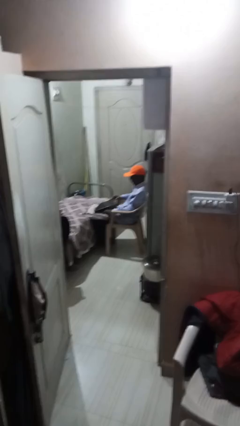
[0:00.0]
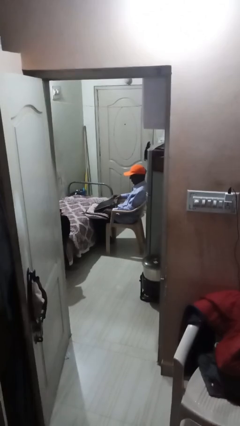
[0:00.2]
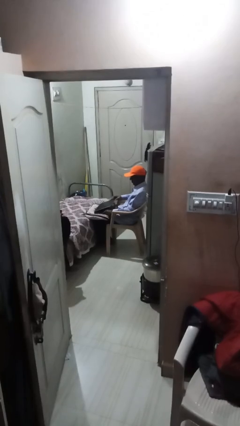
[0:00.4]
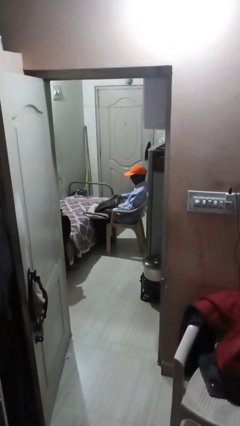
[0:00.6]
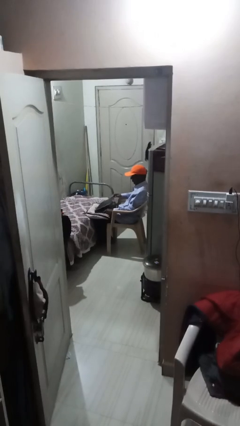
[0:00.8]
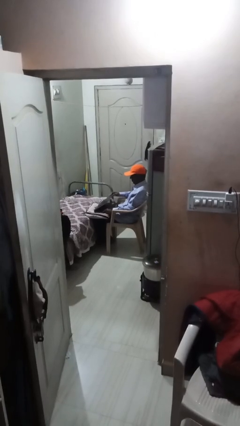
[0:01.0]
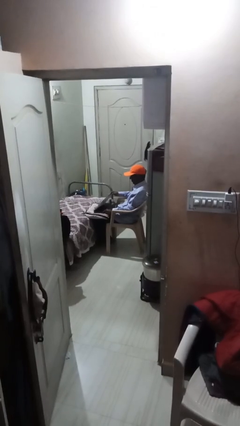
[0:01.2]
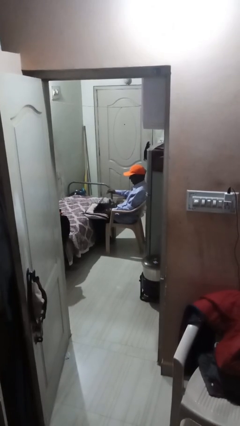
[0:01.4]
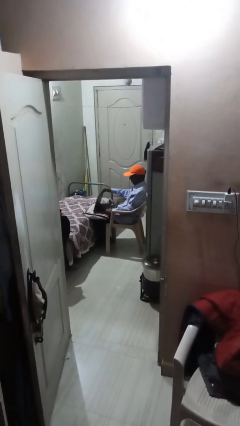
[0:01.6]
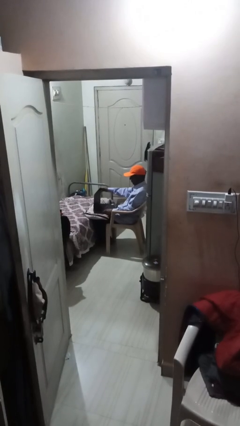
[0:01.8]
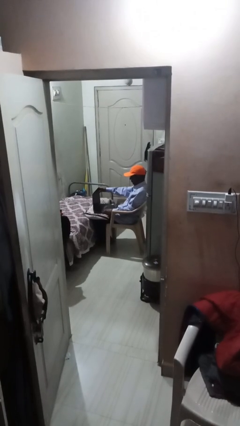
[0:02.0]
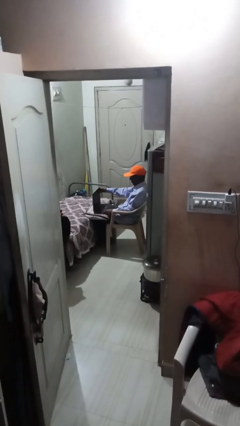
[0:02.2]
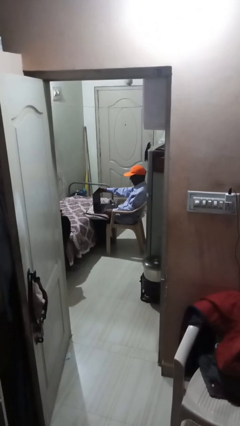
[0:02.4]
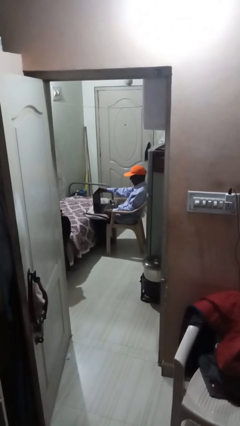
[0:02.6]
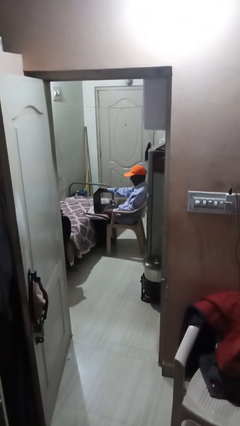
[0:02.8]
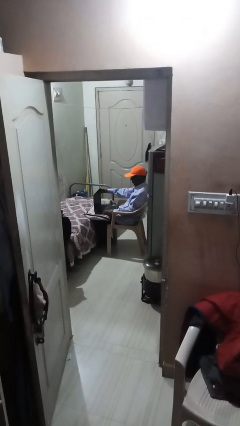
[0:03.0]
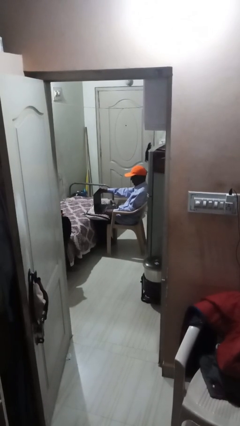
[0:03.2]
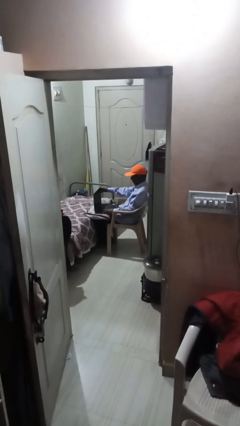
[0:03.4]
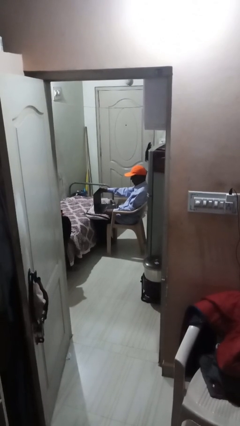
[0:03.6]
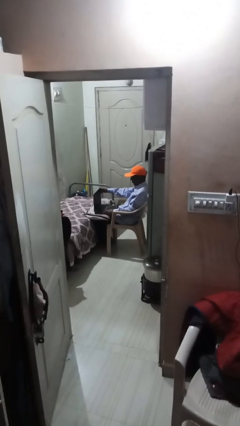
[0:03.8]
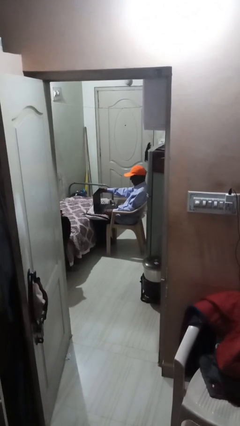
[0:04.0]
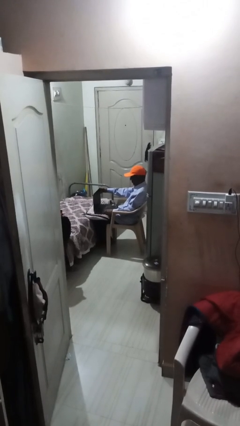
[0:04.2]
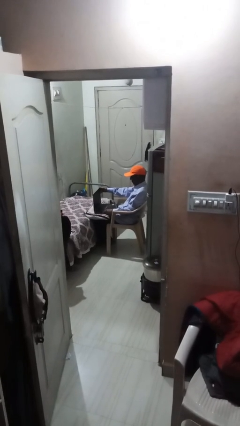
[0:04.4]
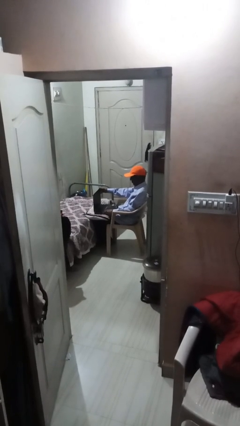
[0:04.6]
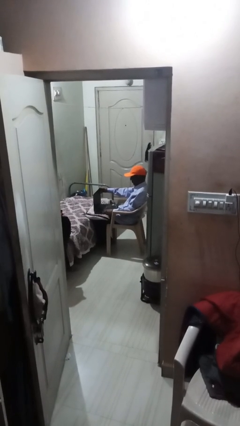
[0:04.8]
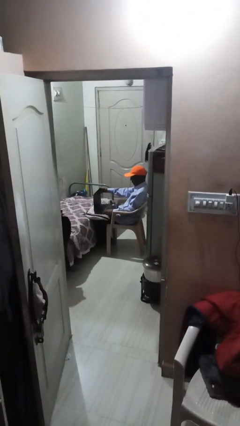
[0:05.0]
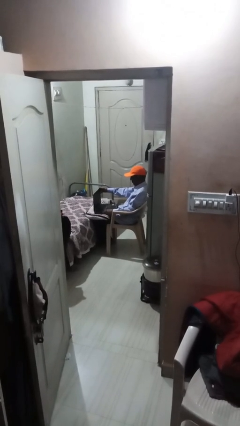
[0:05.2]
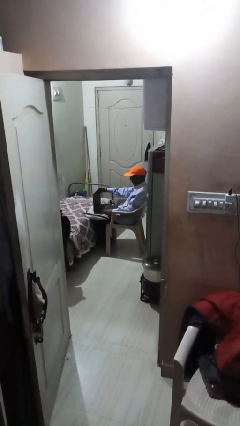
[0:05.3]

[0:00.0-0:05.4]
person interacts with laptop

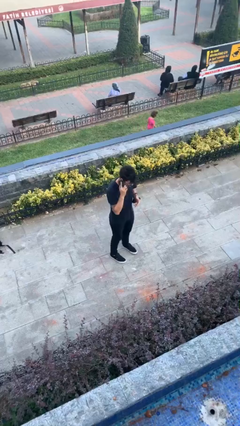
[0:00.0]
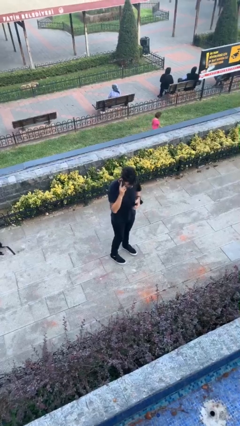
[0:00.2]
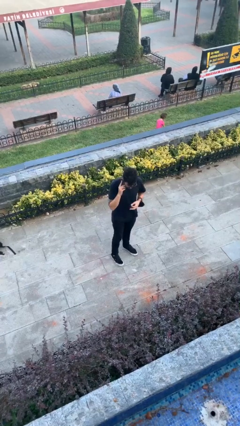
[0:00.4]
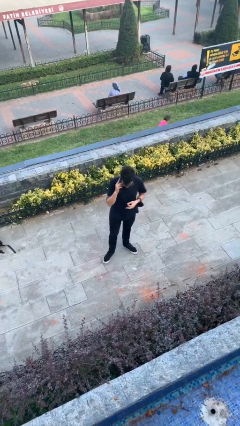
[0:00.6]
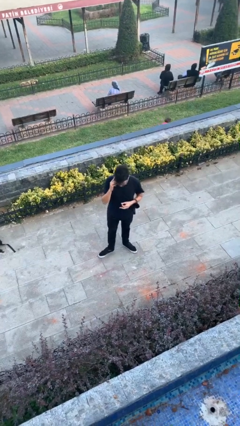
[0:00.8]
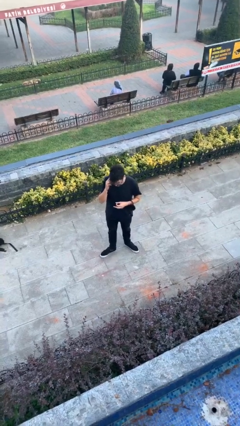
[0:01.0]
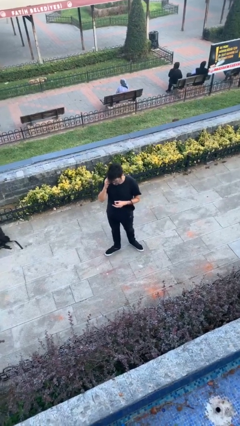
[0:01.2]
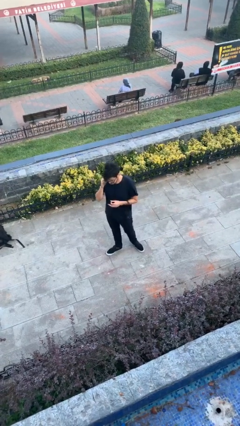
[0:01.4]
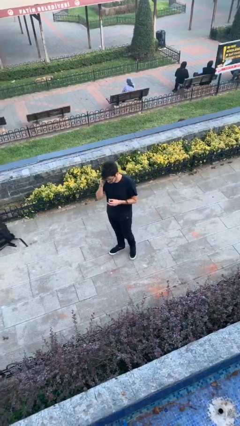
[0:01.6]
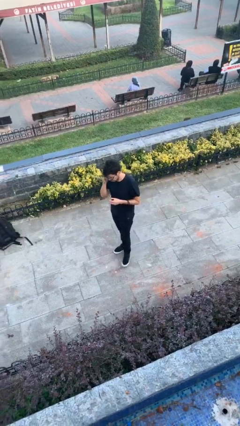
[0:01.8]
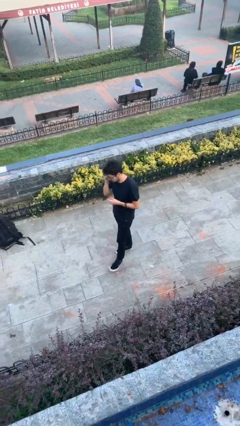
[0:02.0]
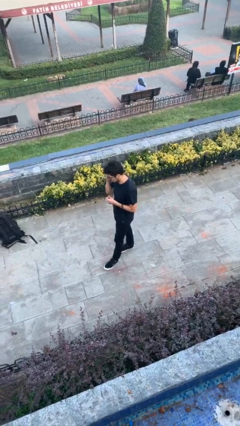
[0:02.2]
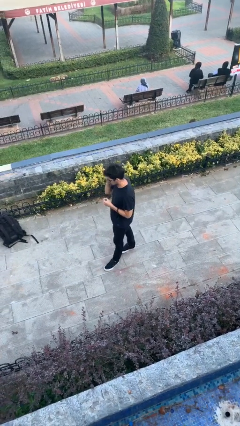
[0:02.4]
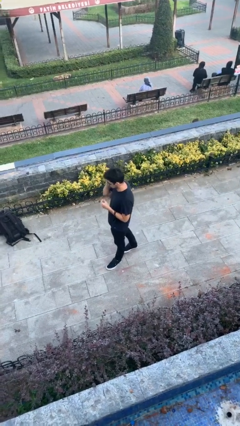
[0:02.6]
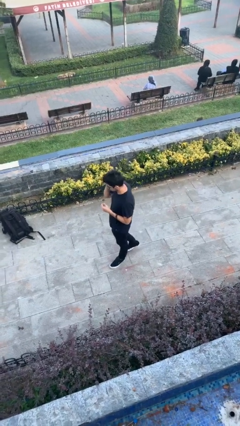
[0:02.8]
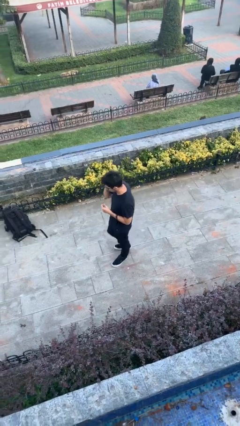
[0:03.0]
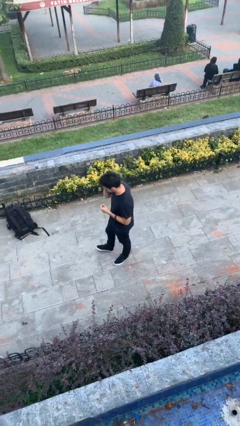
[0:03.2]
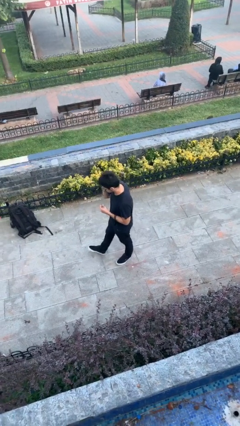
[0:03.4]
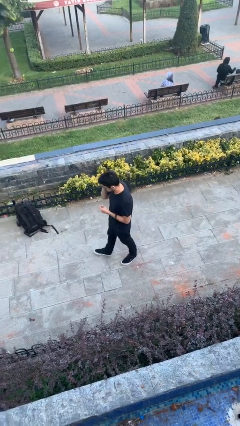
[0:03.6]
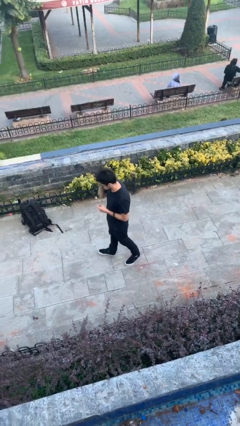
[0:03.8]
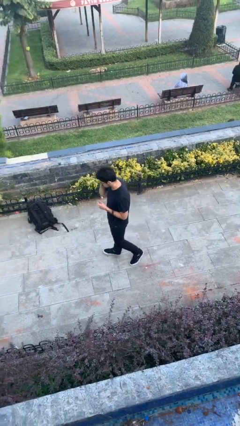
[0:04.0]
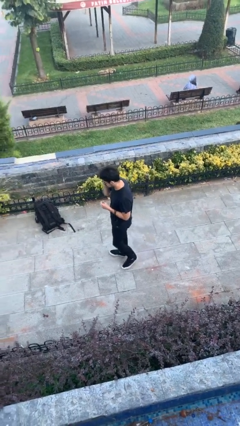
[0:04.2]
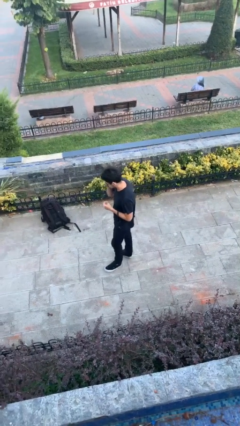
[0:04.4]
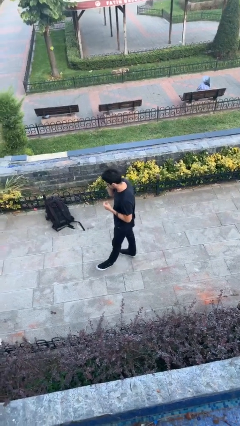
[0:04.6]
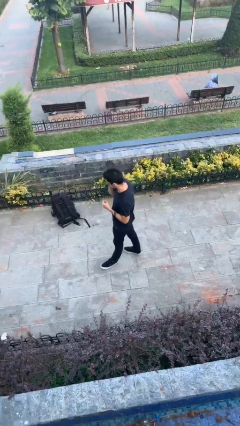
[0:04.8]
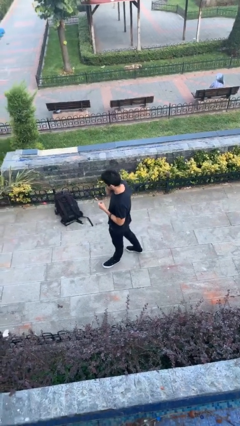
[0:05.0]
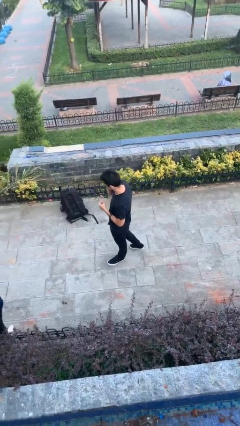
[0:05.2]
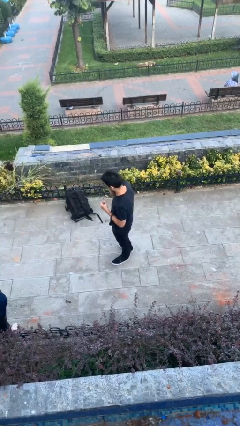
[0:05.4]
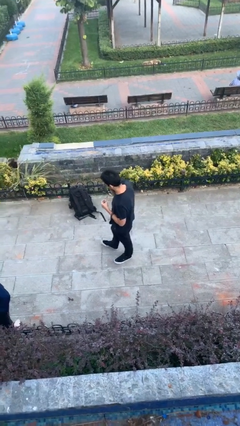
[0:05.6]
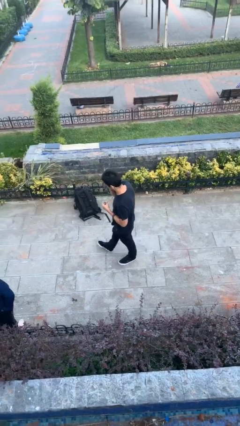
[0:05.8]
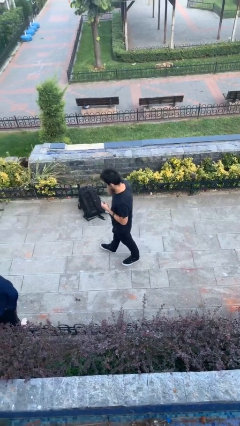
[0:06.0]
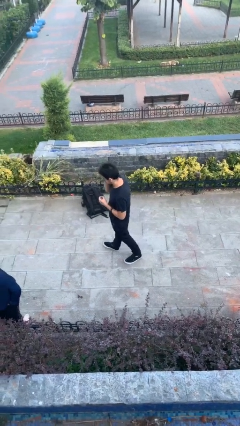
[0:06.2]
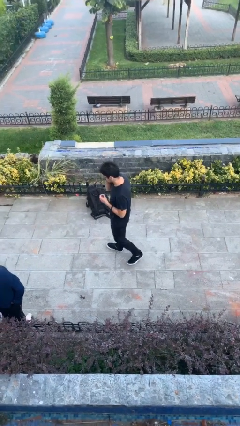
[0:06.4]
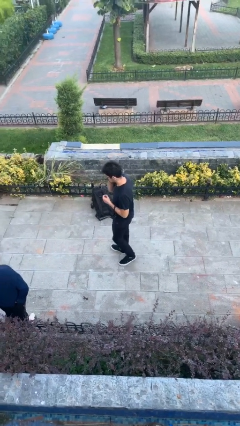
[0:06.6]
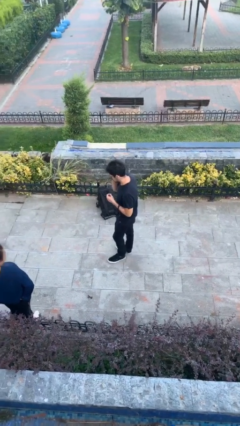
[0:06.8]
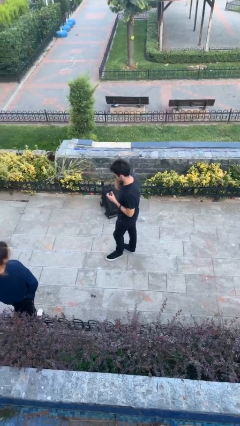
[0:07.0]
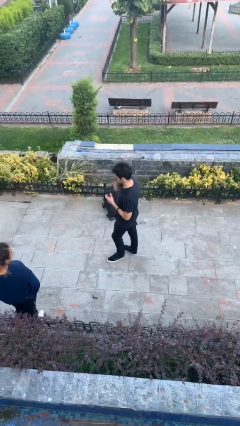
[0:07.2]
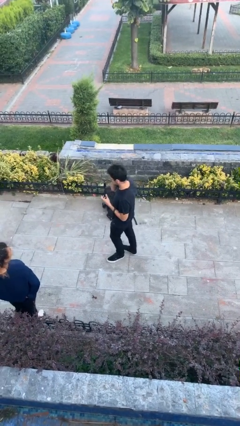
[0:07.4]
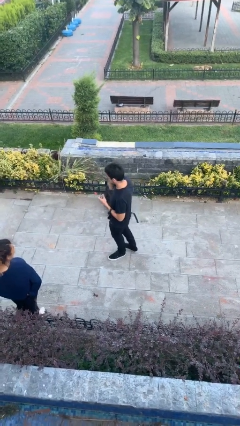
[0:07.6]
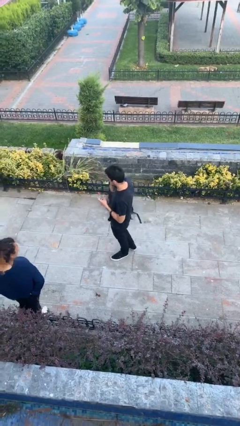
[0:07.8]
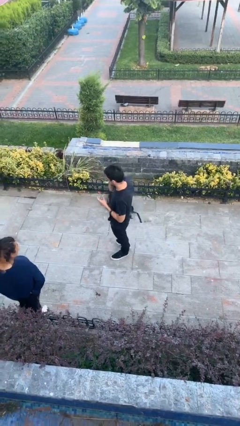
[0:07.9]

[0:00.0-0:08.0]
person talks on phone

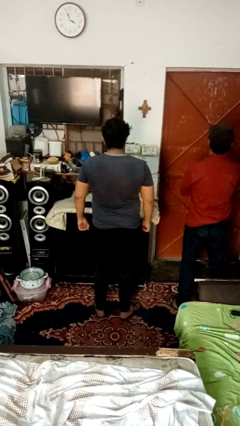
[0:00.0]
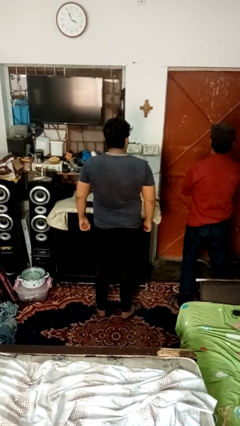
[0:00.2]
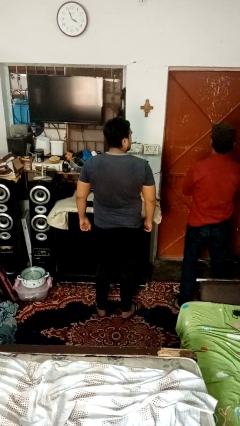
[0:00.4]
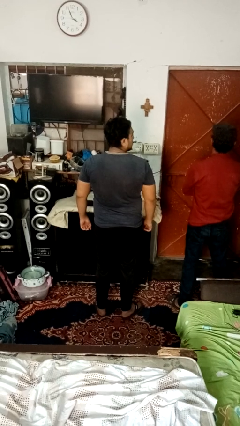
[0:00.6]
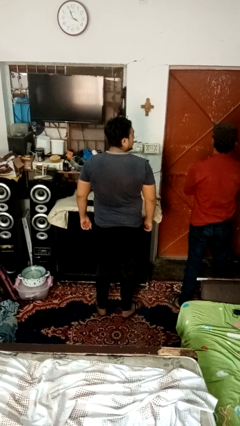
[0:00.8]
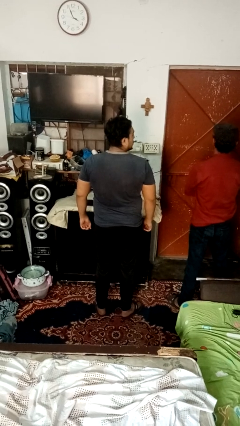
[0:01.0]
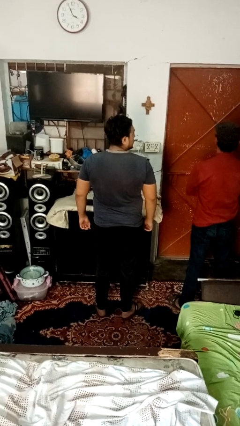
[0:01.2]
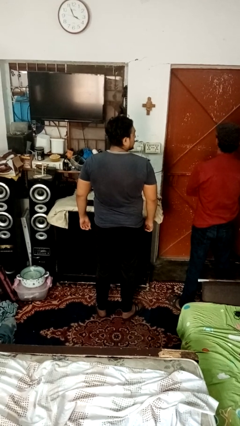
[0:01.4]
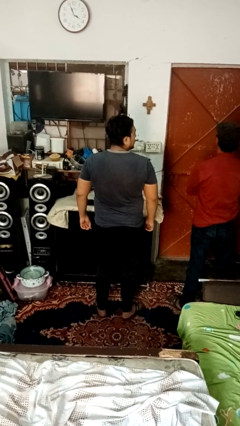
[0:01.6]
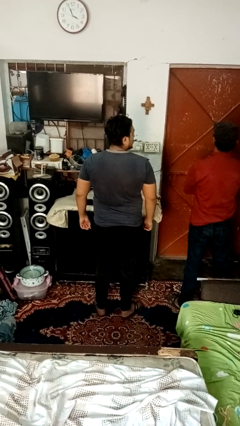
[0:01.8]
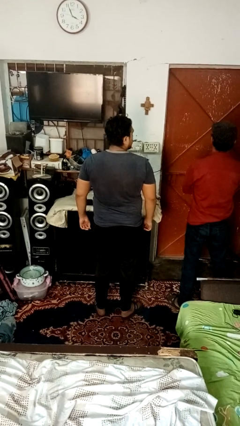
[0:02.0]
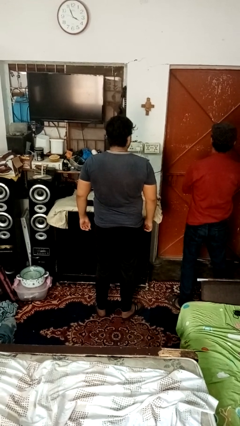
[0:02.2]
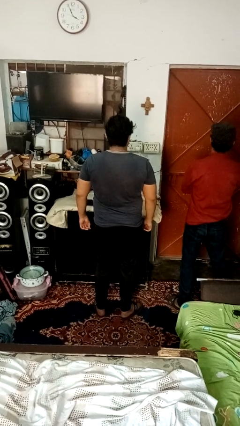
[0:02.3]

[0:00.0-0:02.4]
person looks over shoulder

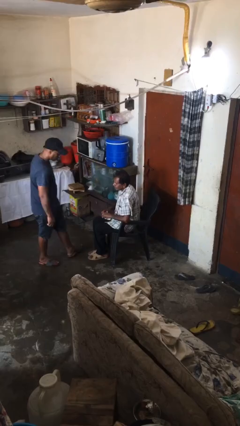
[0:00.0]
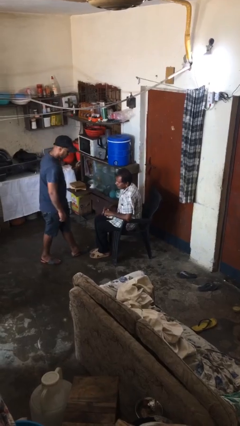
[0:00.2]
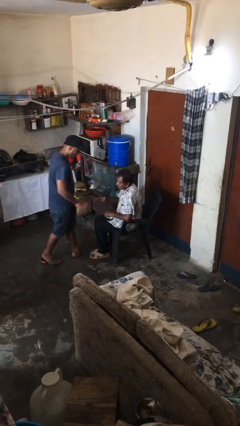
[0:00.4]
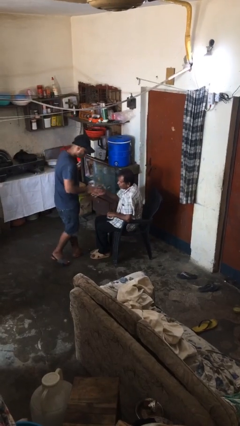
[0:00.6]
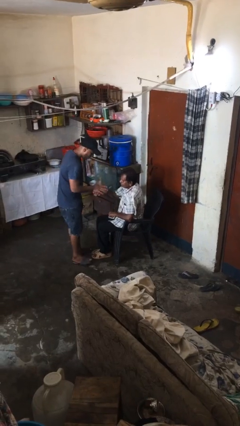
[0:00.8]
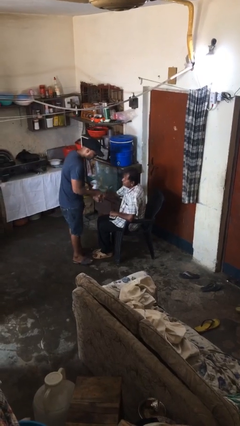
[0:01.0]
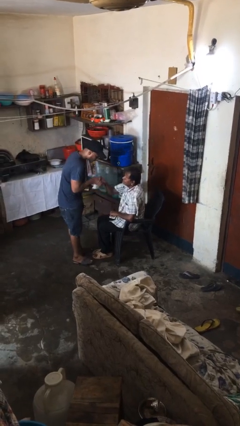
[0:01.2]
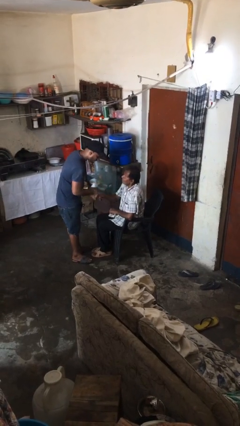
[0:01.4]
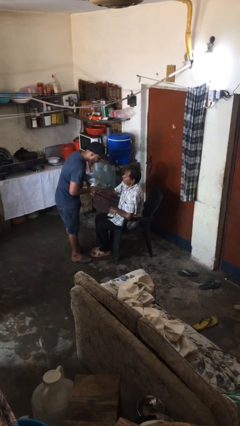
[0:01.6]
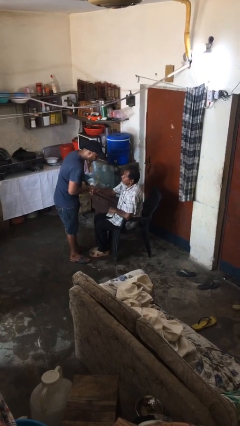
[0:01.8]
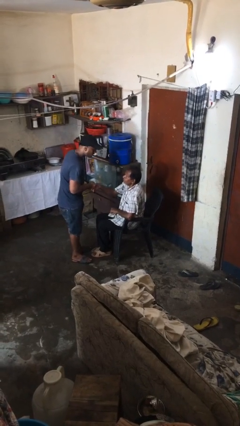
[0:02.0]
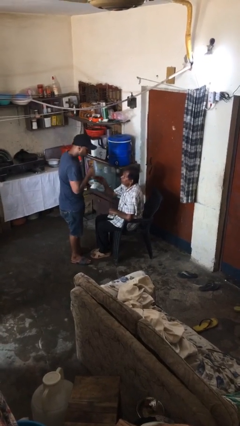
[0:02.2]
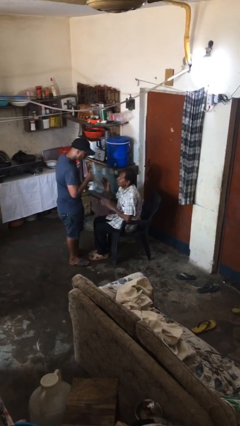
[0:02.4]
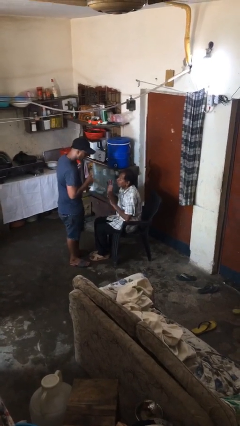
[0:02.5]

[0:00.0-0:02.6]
person shakes hand
